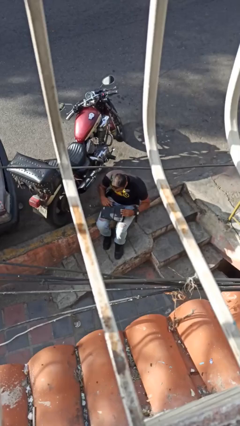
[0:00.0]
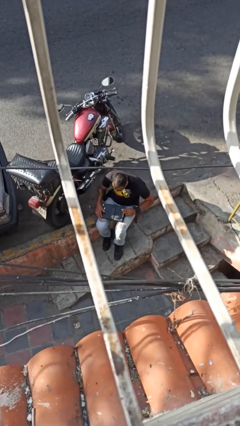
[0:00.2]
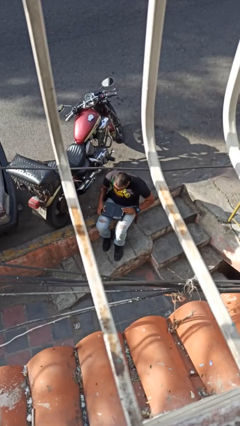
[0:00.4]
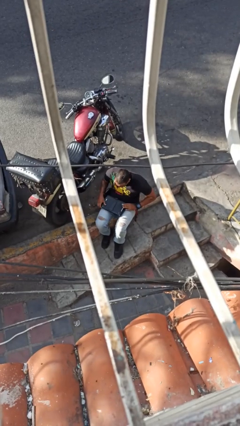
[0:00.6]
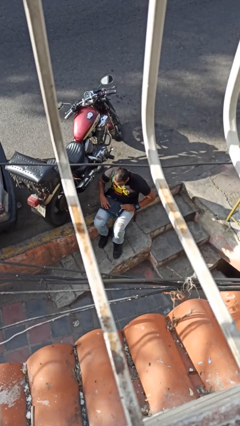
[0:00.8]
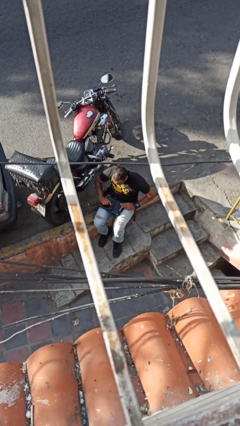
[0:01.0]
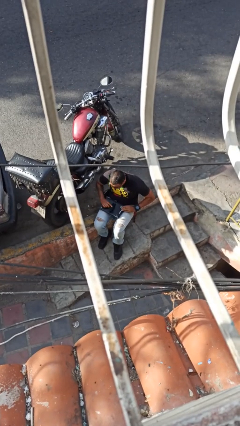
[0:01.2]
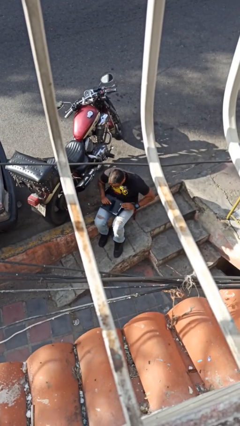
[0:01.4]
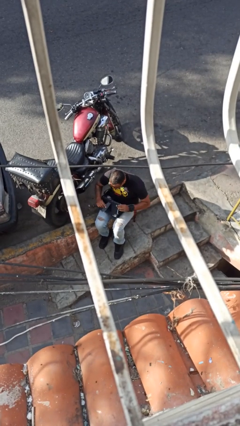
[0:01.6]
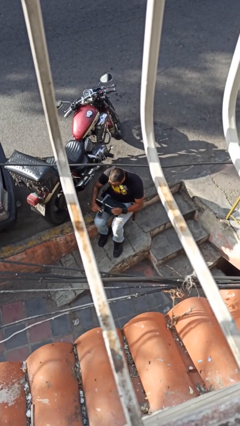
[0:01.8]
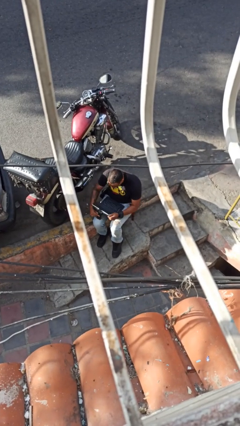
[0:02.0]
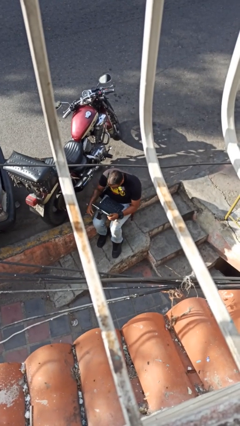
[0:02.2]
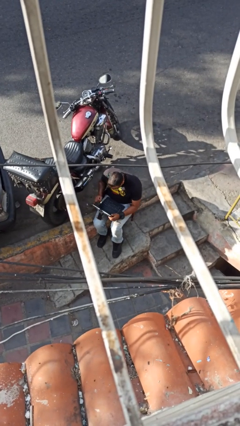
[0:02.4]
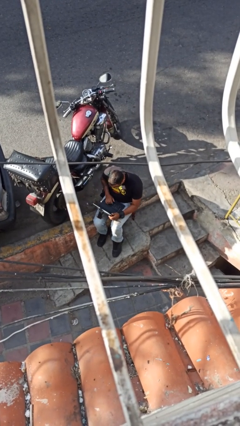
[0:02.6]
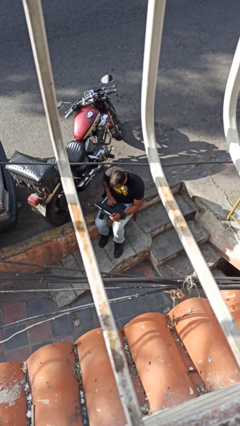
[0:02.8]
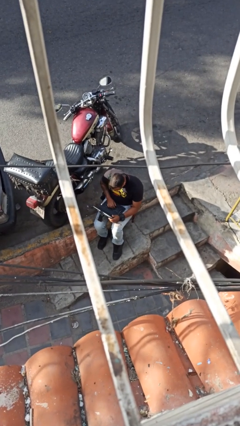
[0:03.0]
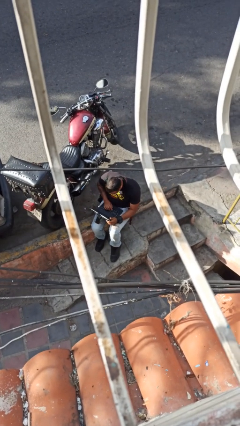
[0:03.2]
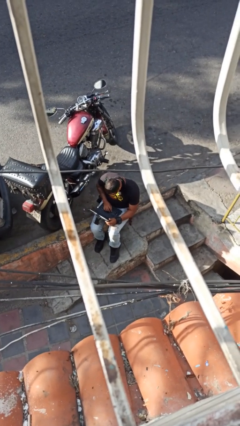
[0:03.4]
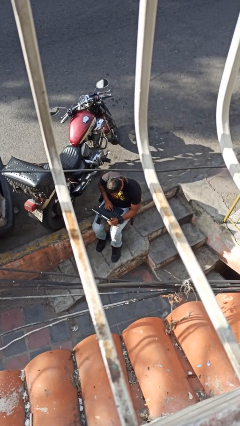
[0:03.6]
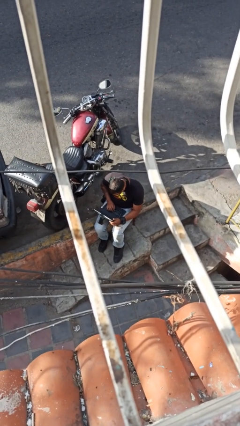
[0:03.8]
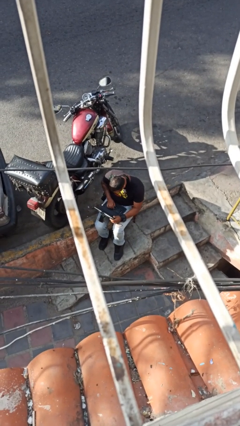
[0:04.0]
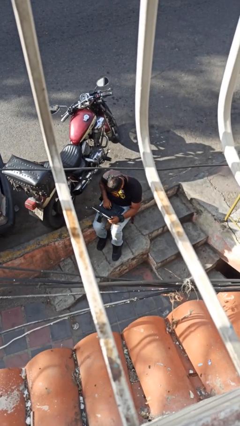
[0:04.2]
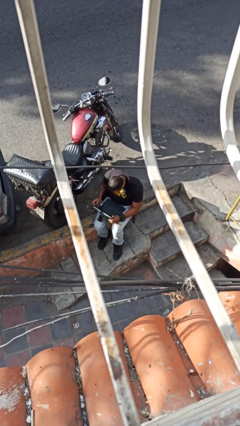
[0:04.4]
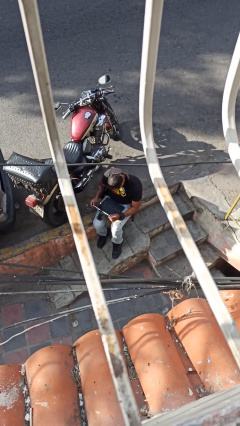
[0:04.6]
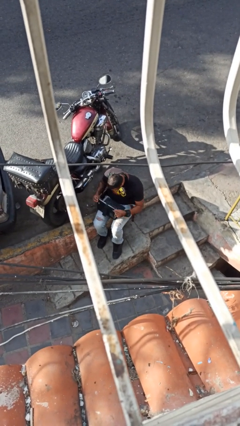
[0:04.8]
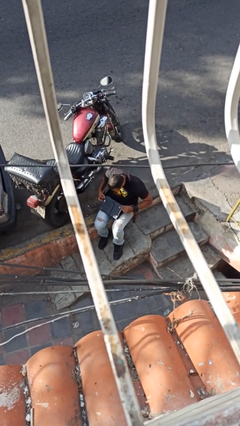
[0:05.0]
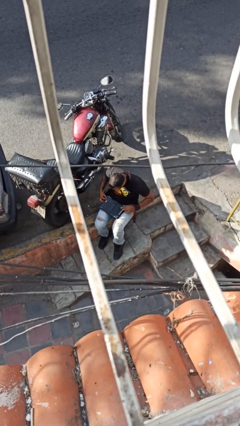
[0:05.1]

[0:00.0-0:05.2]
person interacts with laptop

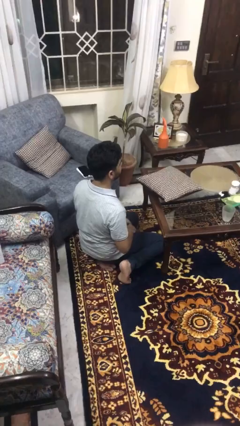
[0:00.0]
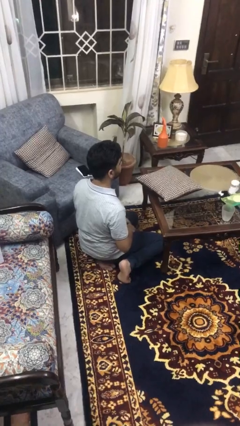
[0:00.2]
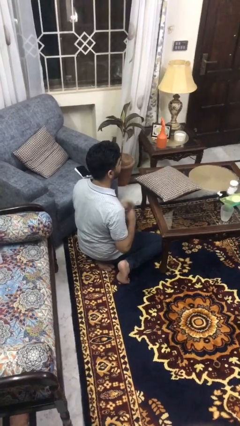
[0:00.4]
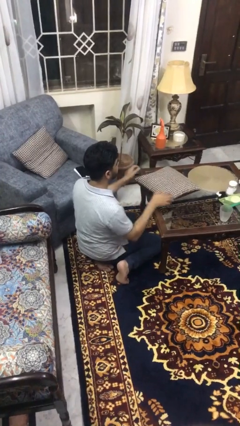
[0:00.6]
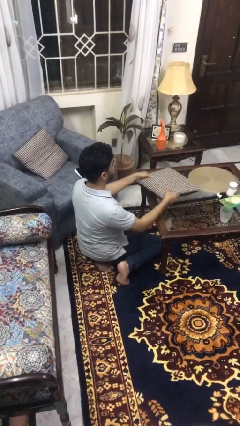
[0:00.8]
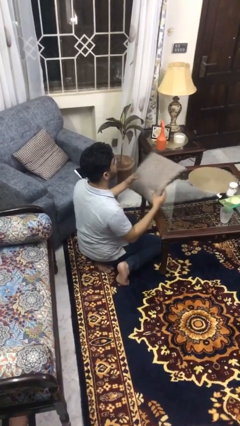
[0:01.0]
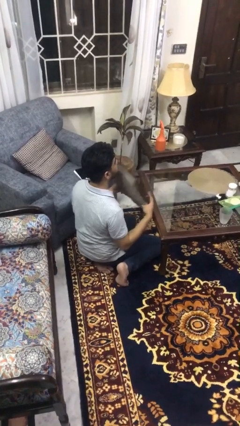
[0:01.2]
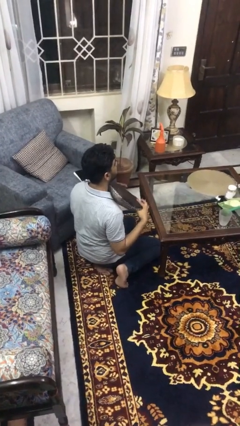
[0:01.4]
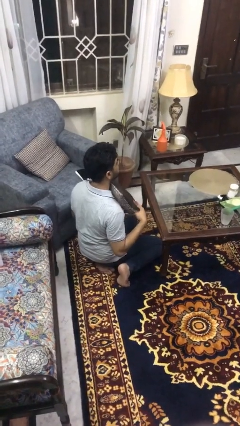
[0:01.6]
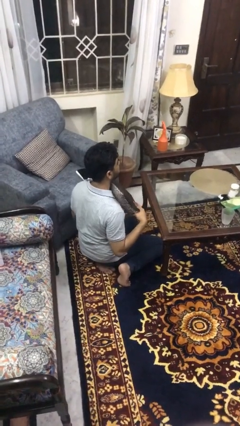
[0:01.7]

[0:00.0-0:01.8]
person picks up object from table

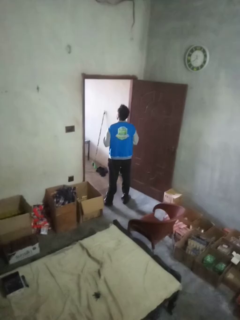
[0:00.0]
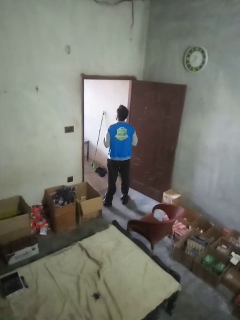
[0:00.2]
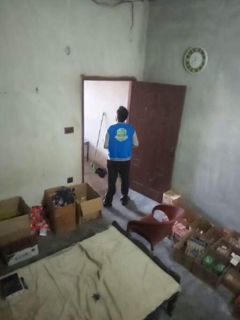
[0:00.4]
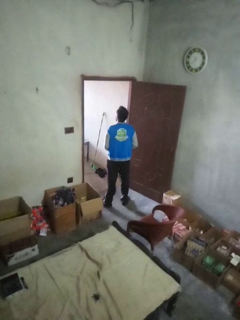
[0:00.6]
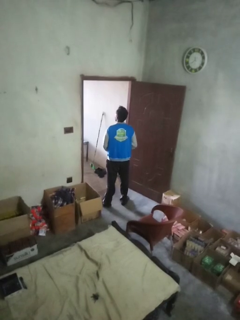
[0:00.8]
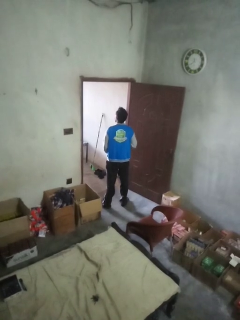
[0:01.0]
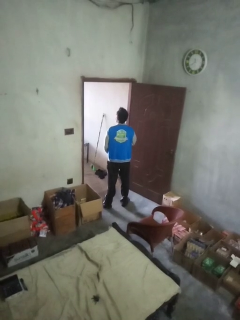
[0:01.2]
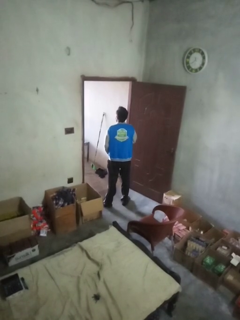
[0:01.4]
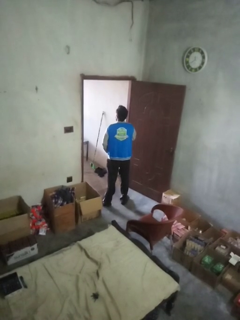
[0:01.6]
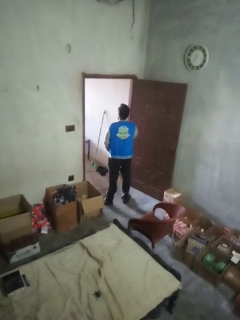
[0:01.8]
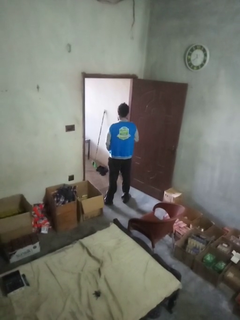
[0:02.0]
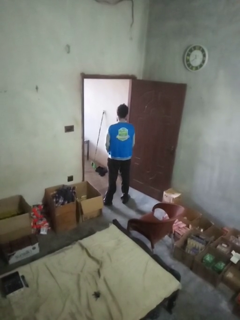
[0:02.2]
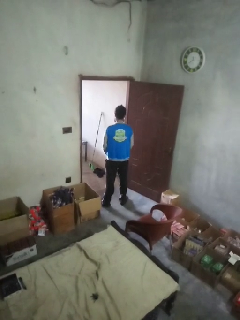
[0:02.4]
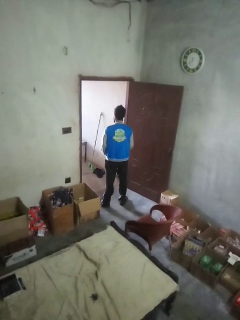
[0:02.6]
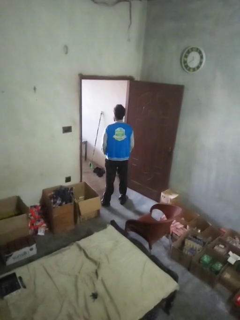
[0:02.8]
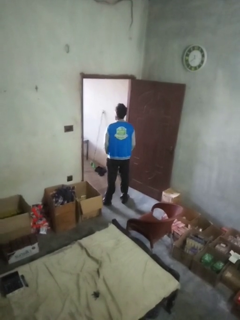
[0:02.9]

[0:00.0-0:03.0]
person unzips jacket

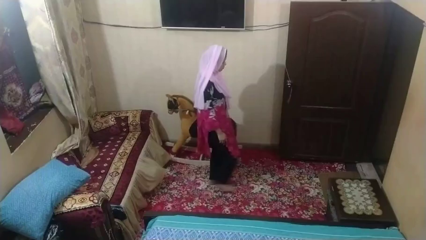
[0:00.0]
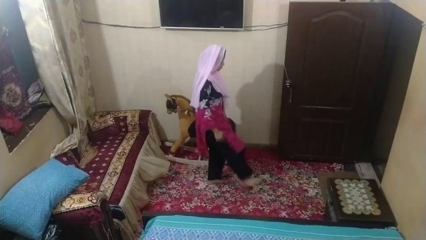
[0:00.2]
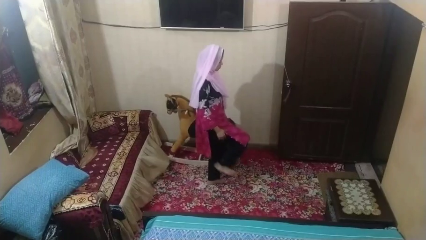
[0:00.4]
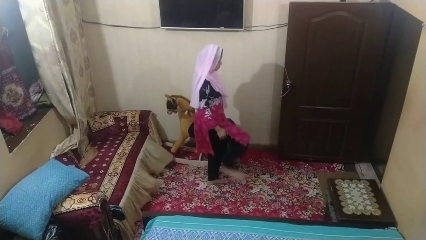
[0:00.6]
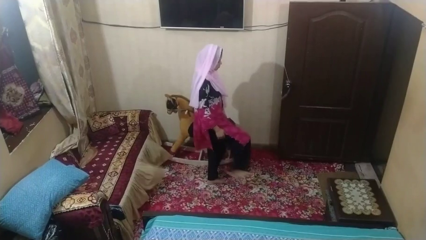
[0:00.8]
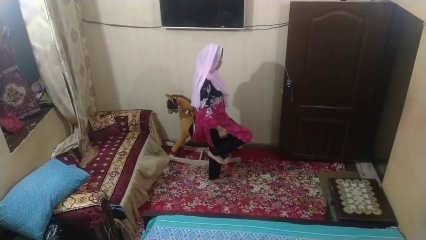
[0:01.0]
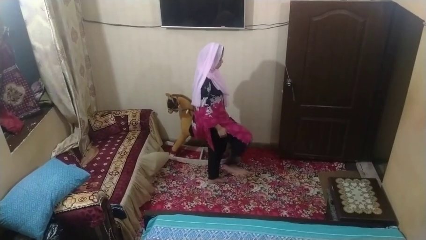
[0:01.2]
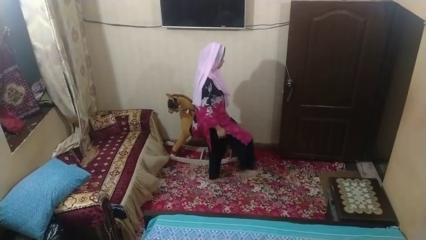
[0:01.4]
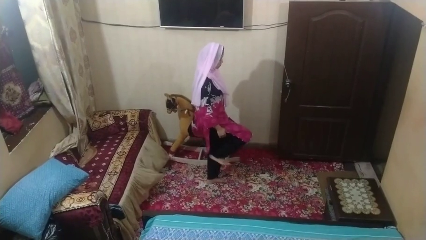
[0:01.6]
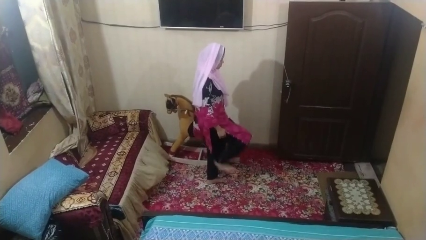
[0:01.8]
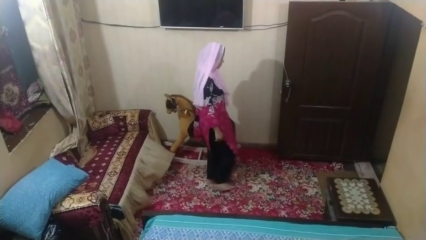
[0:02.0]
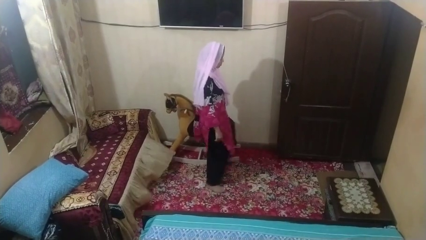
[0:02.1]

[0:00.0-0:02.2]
person karate kicks

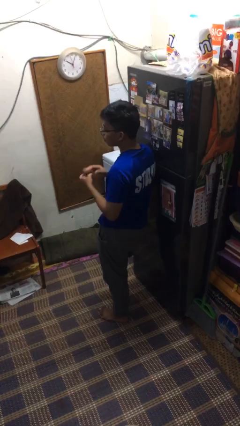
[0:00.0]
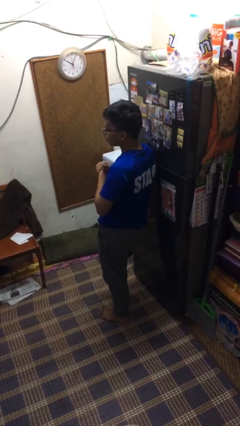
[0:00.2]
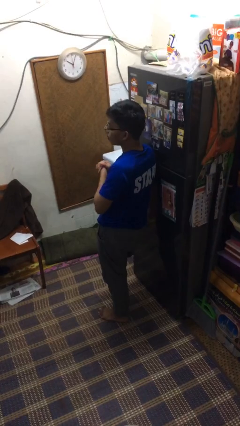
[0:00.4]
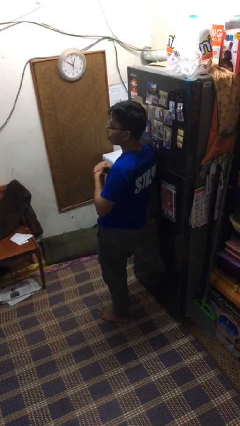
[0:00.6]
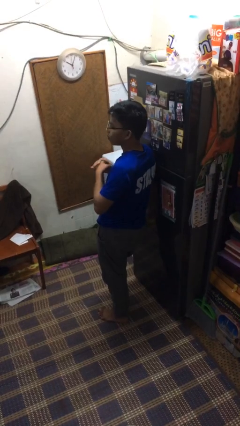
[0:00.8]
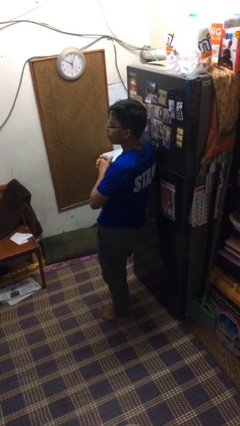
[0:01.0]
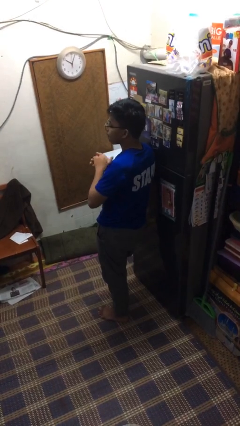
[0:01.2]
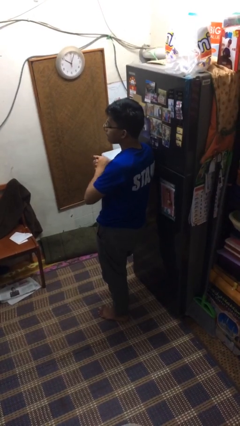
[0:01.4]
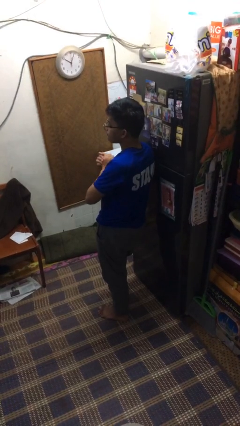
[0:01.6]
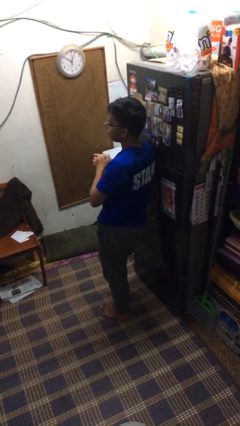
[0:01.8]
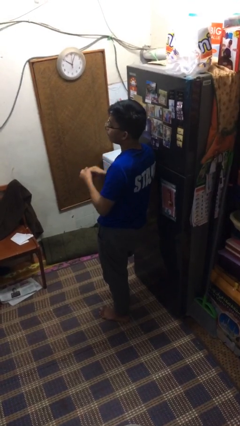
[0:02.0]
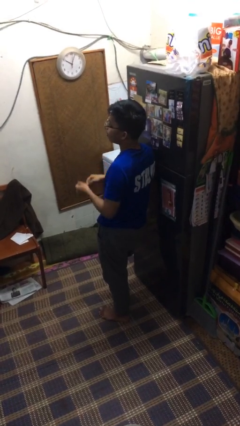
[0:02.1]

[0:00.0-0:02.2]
person cracks knuckles

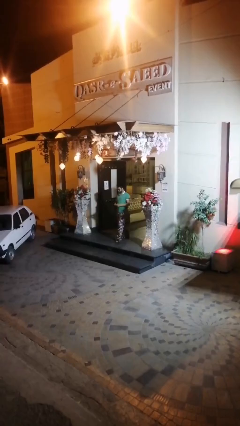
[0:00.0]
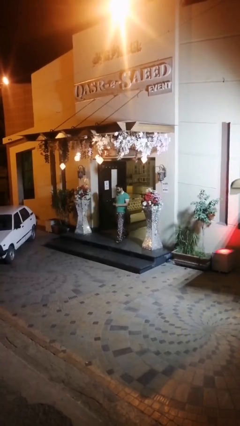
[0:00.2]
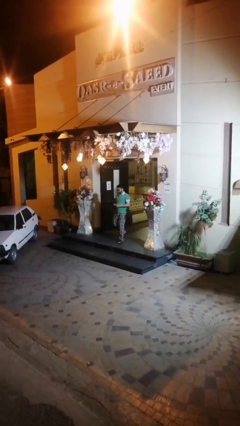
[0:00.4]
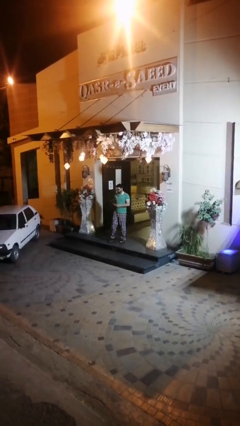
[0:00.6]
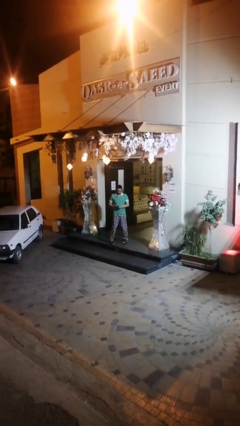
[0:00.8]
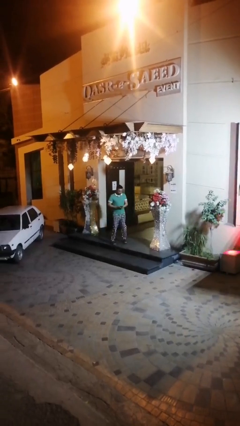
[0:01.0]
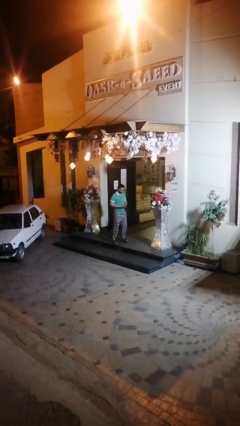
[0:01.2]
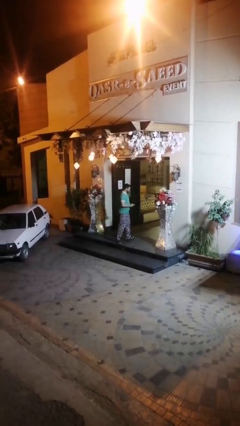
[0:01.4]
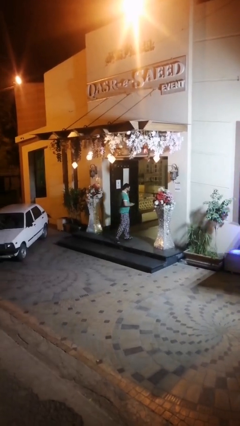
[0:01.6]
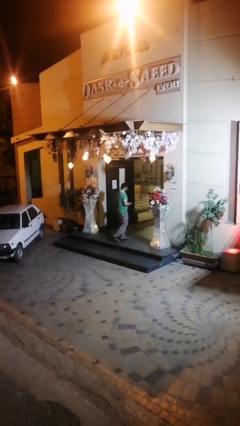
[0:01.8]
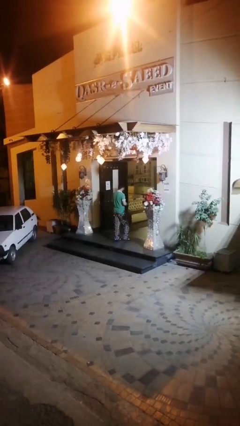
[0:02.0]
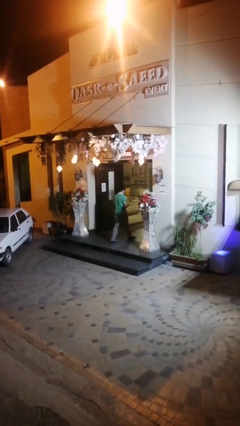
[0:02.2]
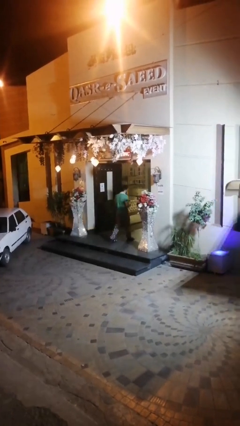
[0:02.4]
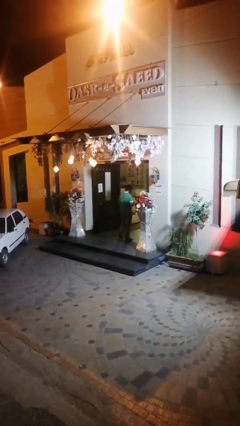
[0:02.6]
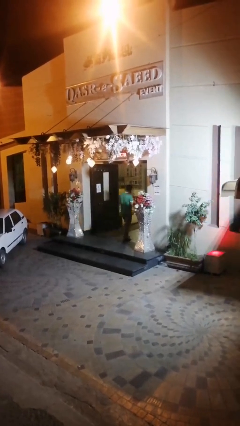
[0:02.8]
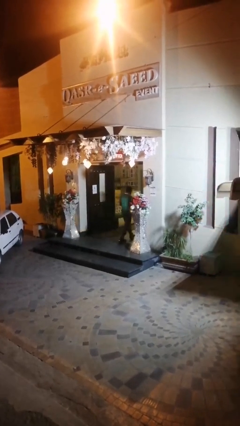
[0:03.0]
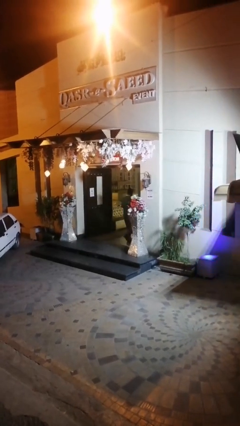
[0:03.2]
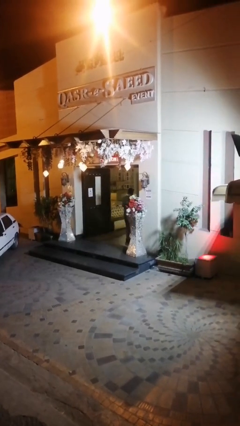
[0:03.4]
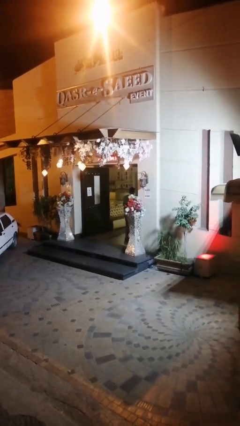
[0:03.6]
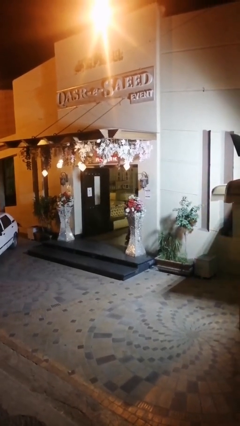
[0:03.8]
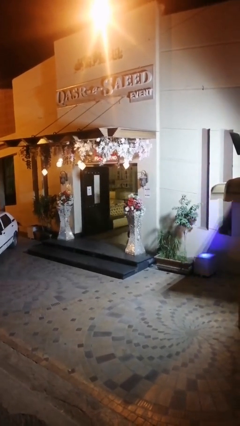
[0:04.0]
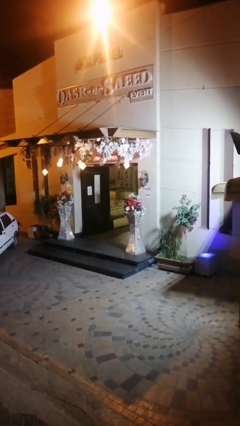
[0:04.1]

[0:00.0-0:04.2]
person enters scene through structure
